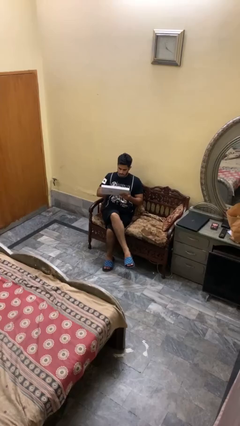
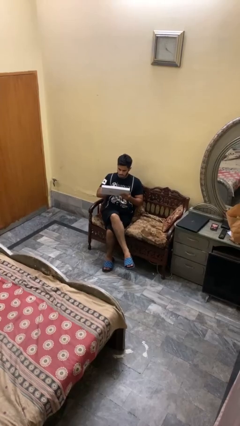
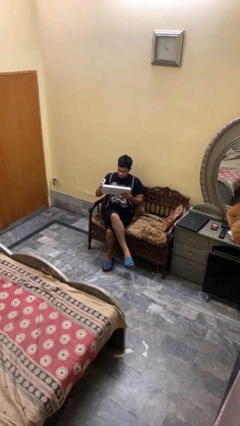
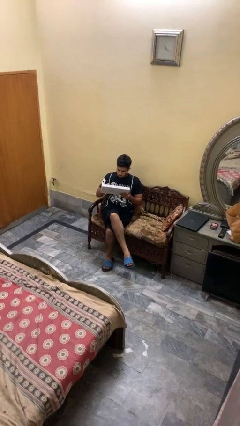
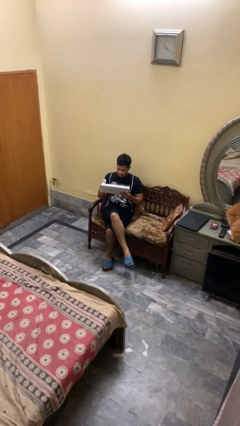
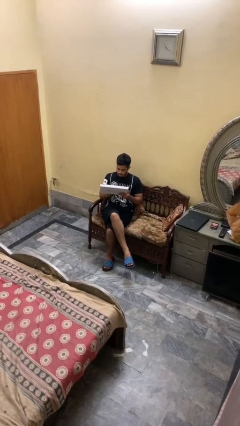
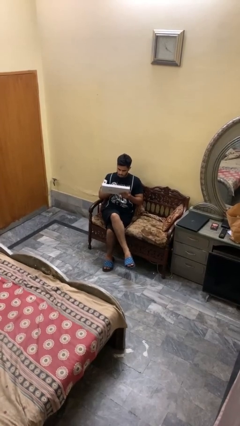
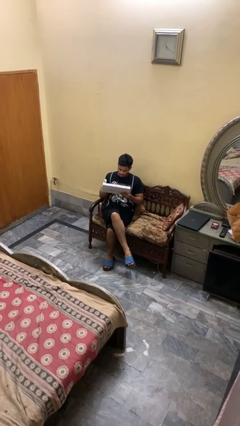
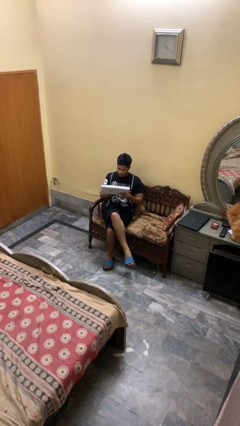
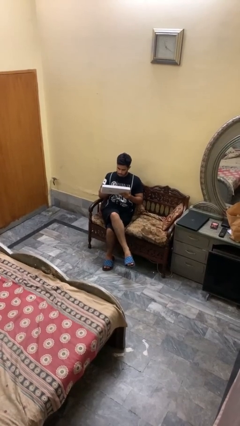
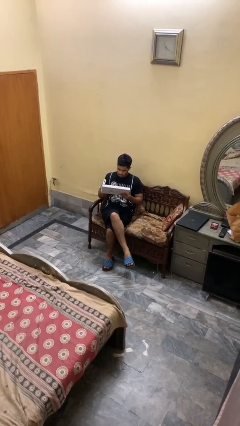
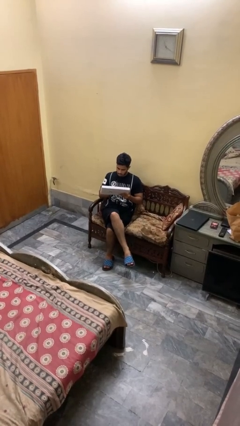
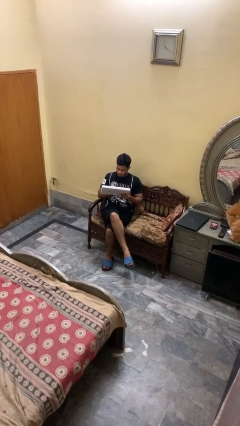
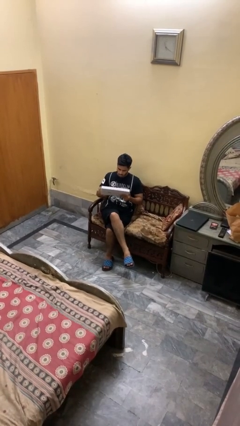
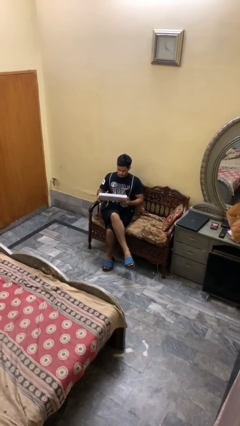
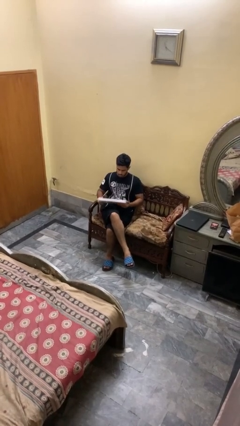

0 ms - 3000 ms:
person interacts with tablet

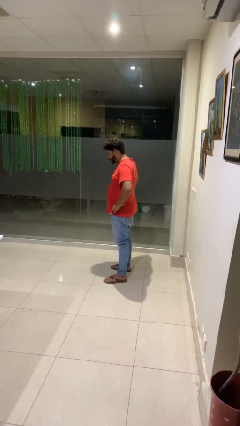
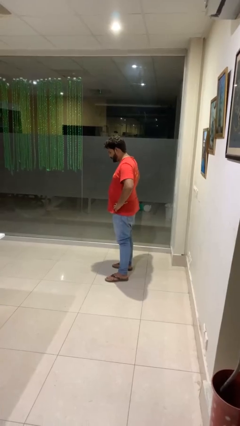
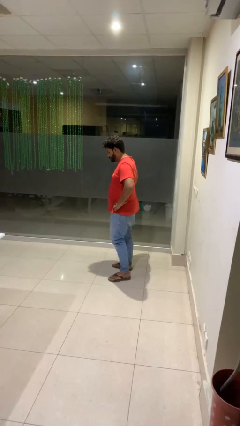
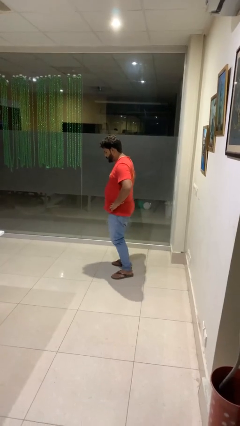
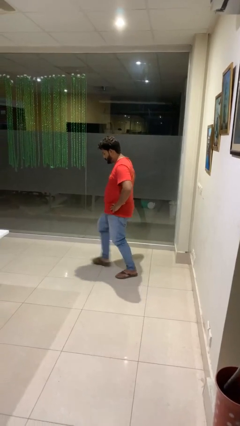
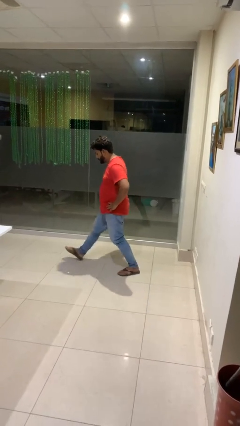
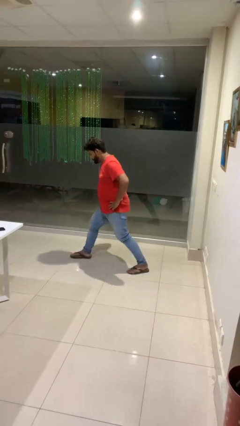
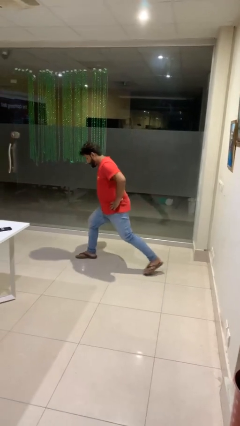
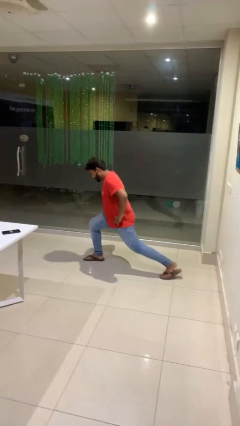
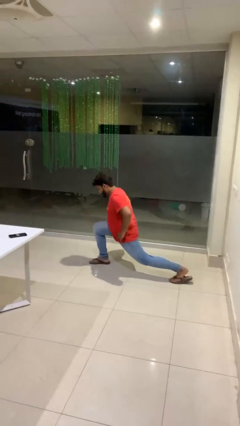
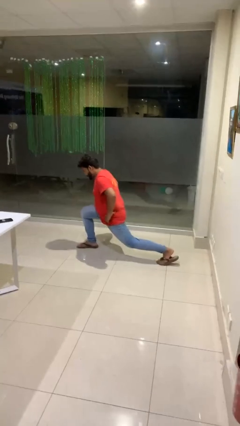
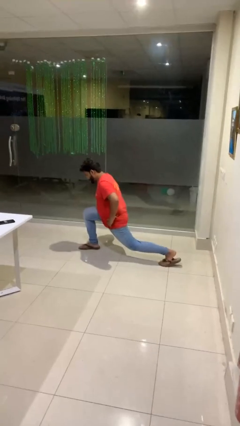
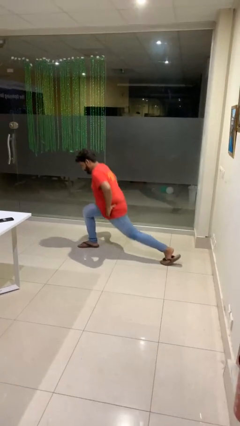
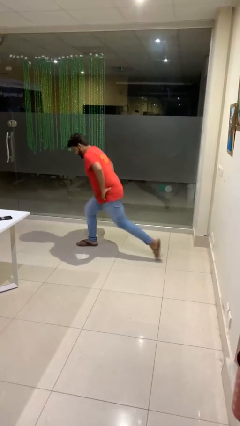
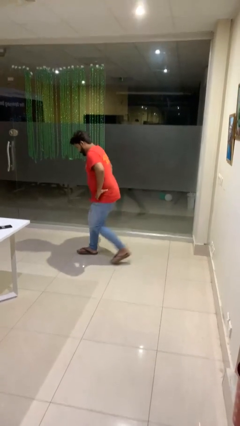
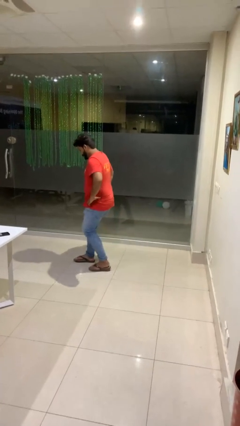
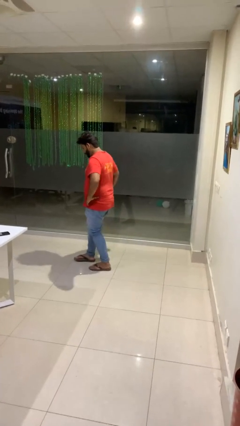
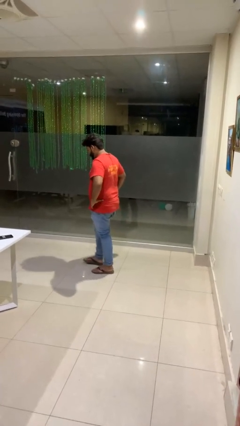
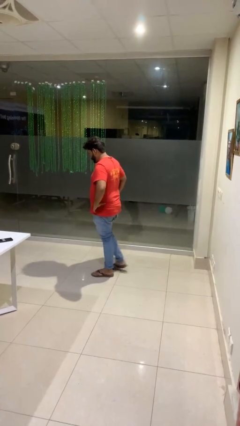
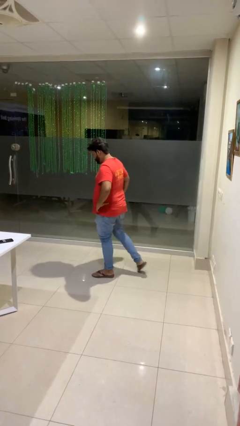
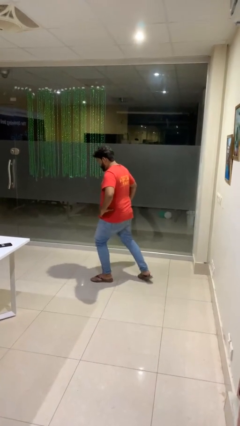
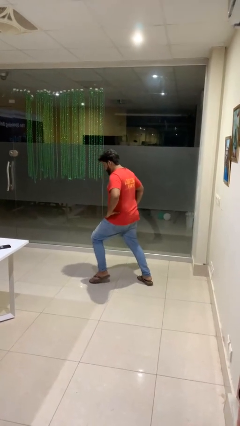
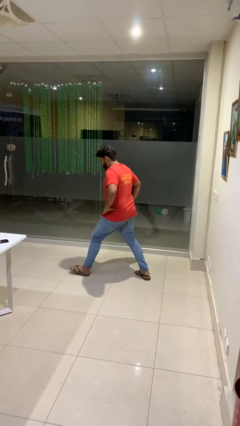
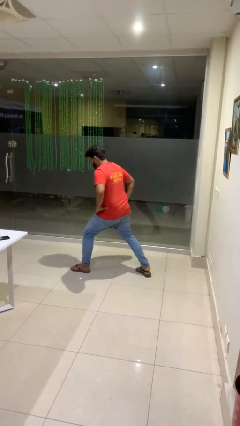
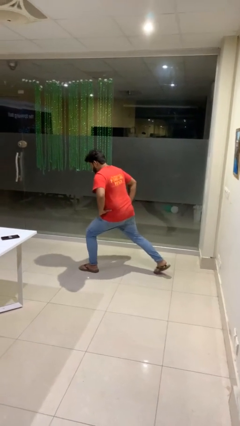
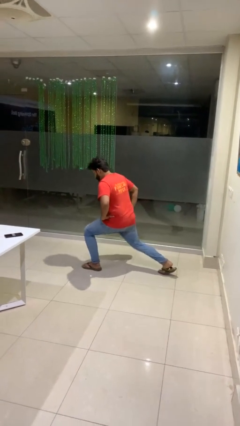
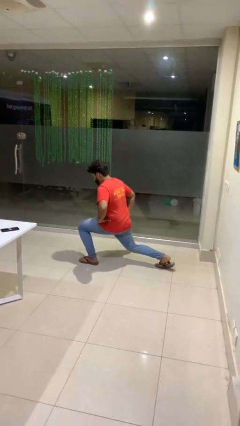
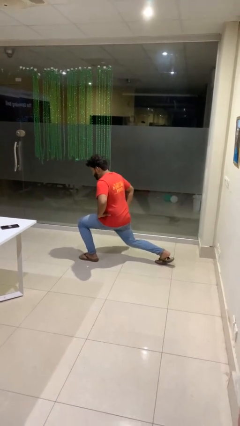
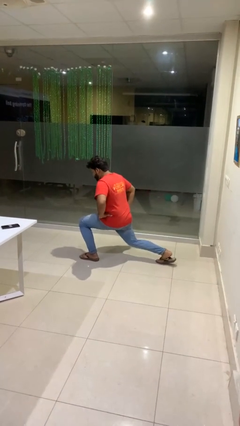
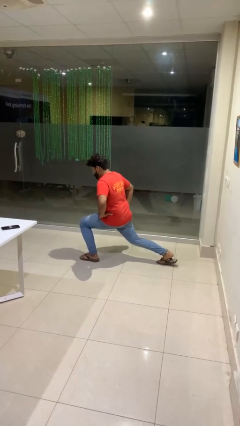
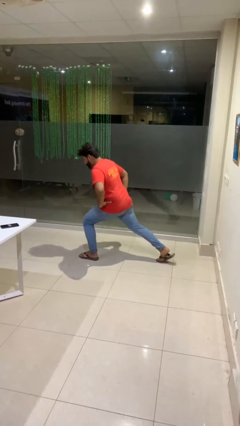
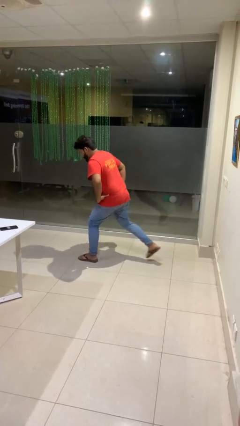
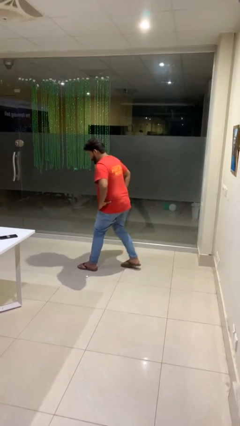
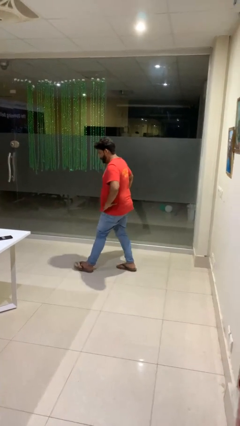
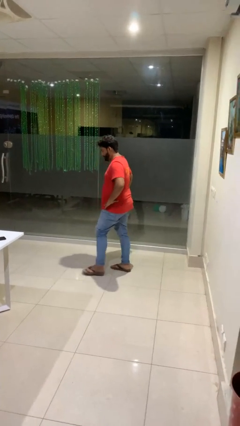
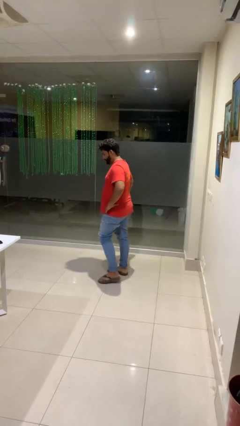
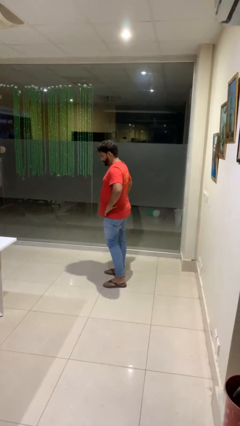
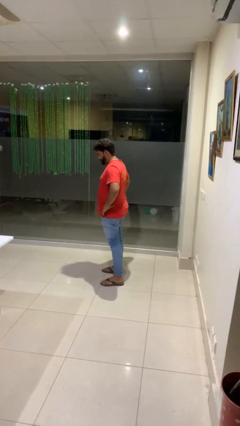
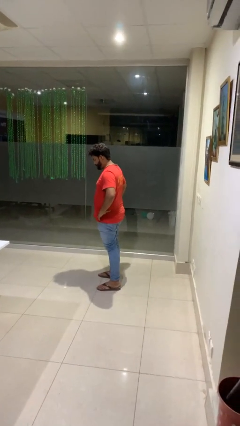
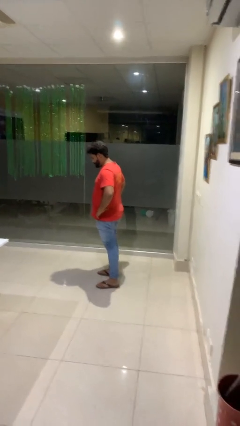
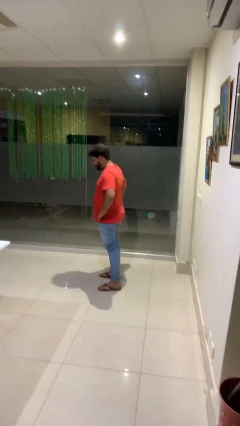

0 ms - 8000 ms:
person exercises with lunges

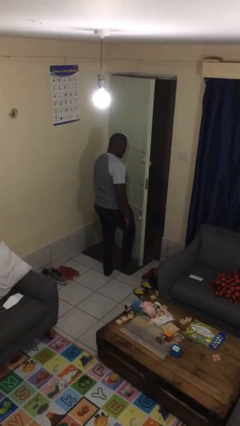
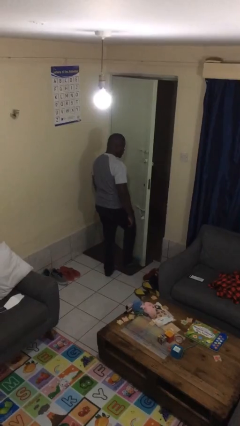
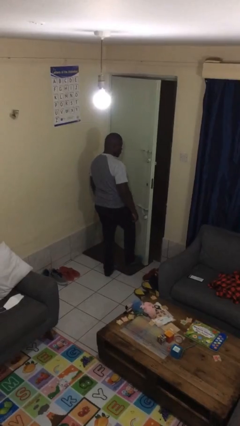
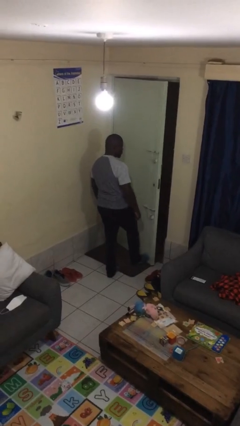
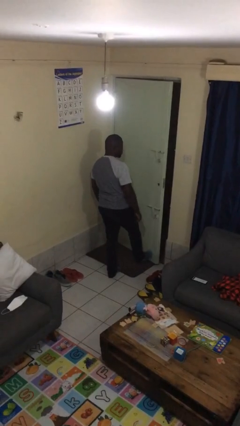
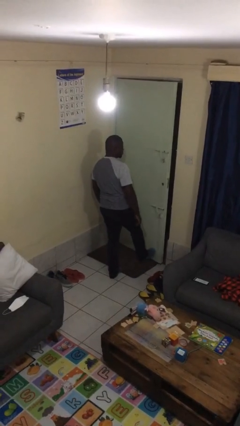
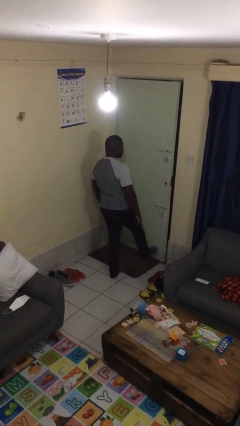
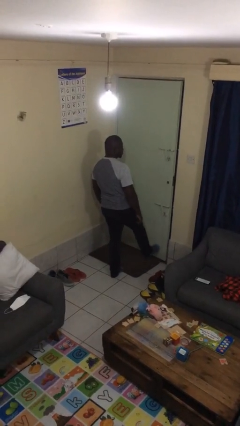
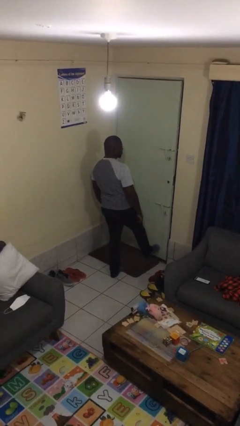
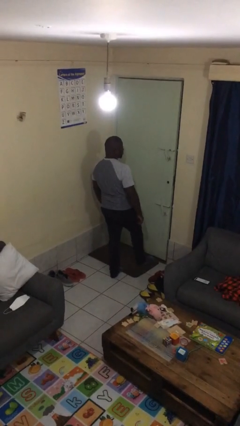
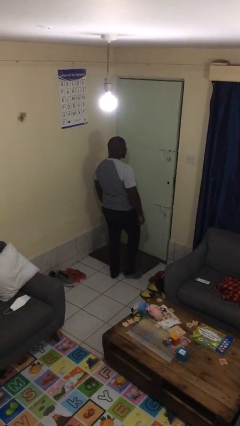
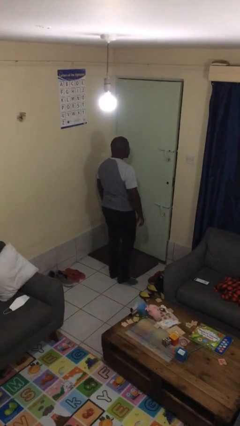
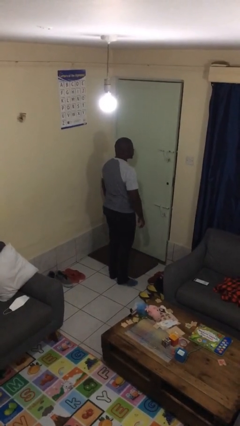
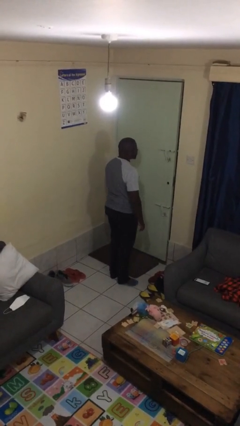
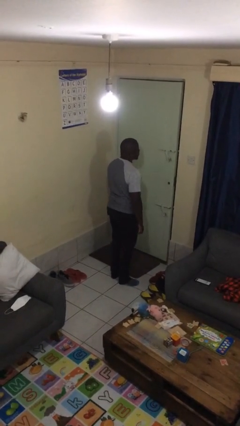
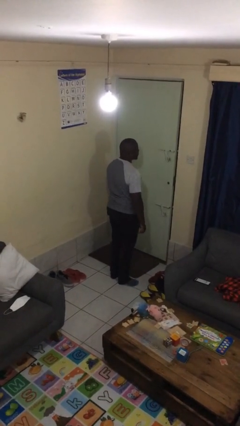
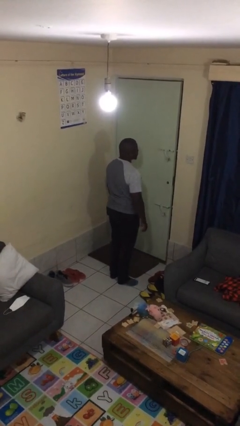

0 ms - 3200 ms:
person closes door with foot

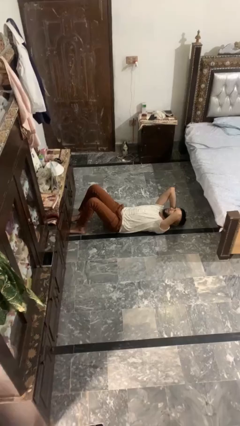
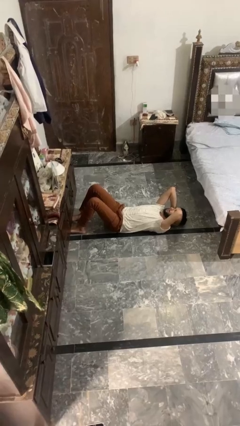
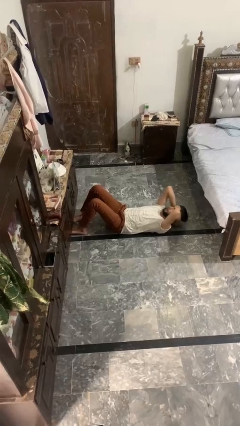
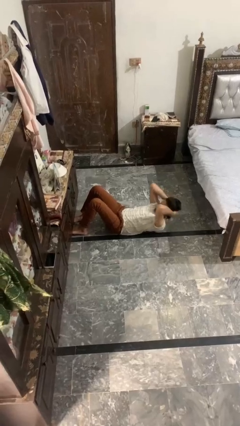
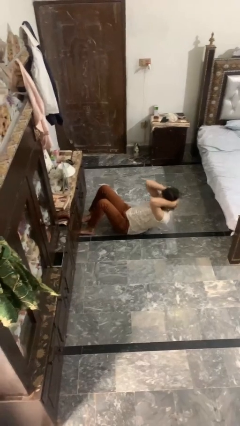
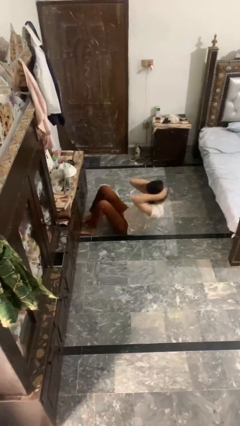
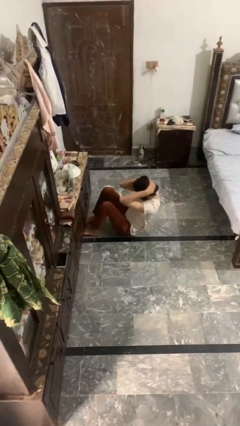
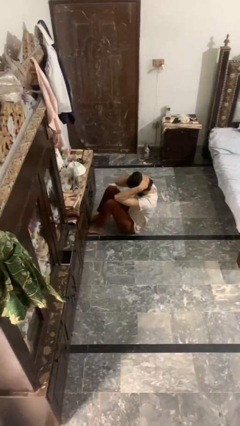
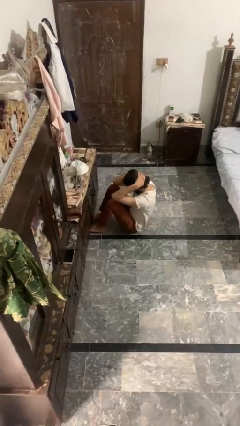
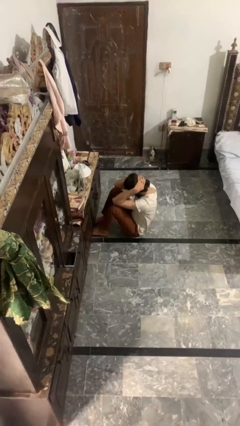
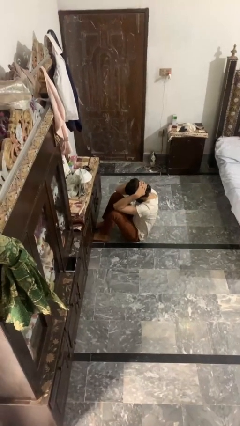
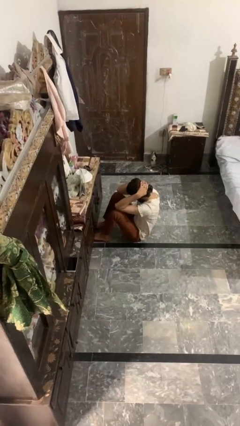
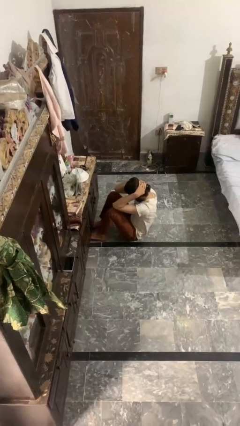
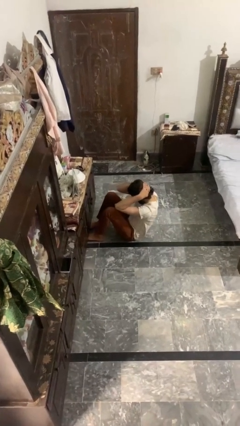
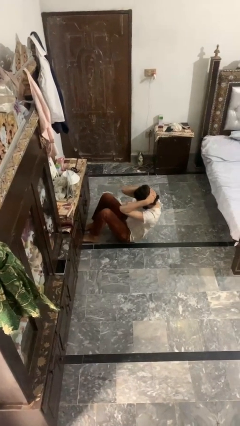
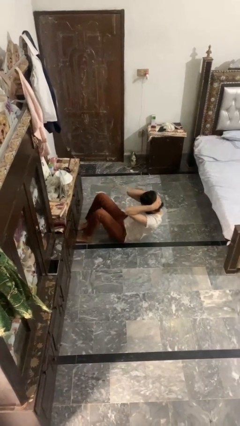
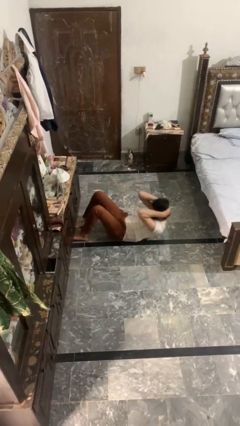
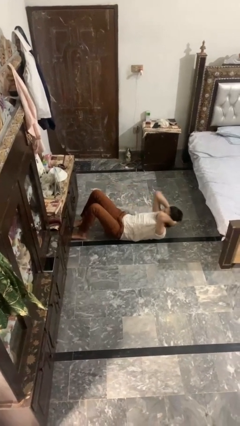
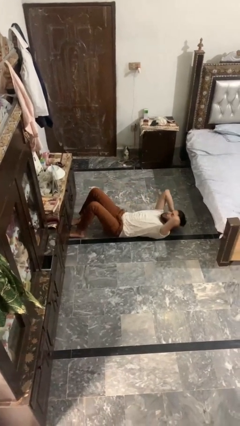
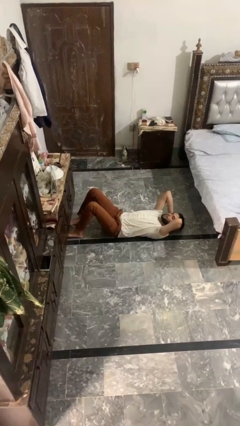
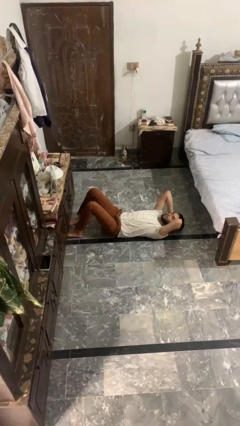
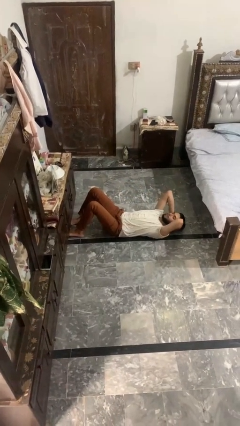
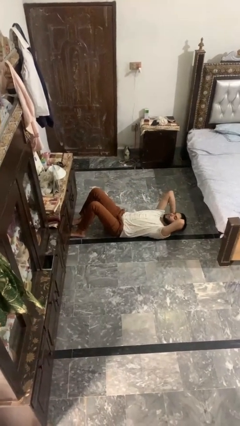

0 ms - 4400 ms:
person exercises with situp
